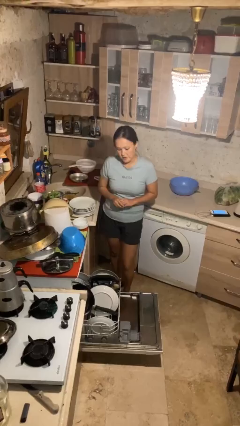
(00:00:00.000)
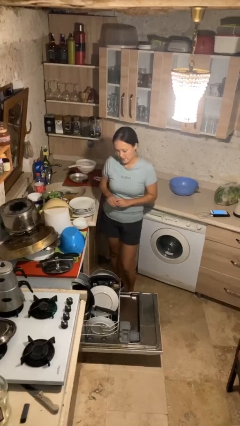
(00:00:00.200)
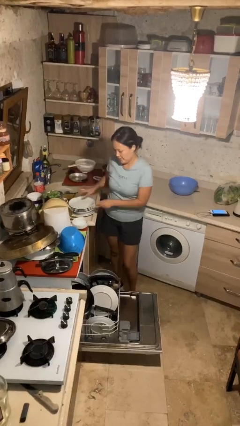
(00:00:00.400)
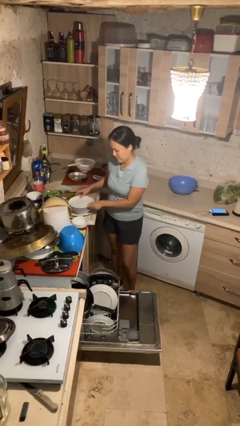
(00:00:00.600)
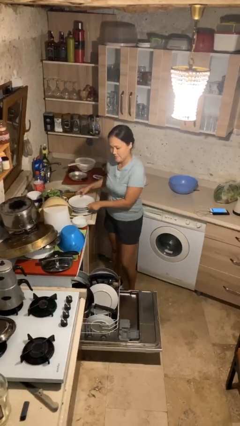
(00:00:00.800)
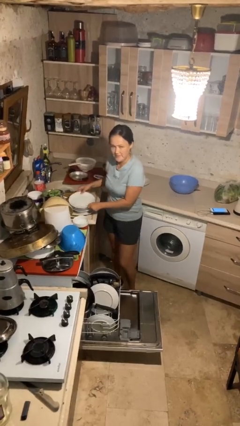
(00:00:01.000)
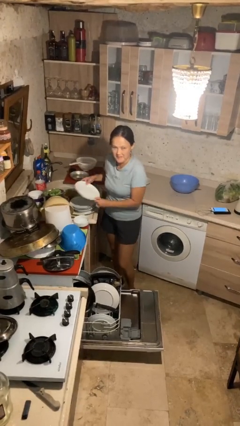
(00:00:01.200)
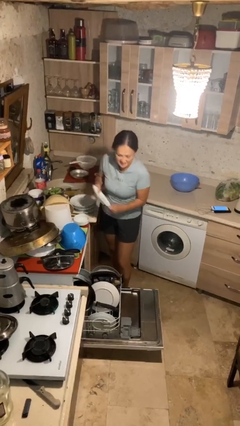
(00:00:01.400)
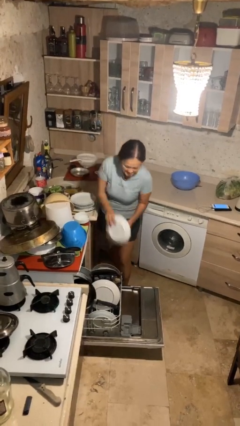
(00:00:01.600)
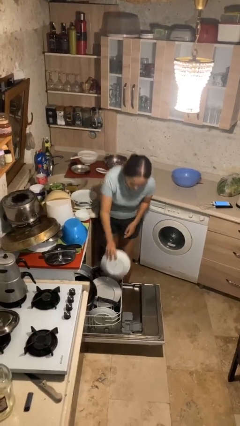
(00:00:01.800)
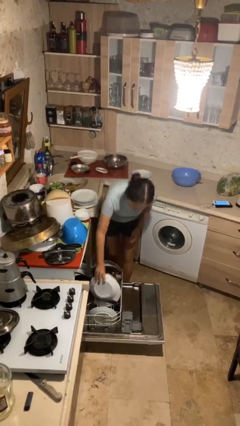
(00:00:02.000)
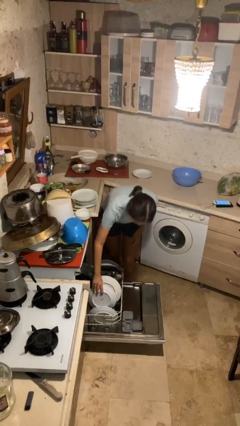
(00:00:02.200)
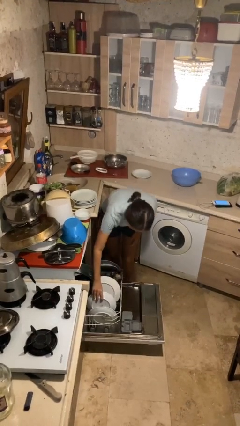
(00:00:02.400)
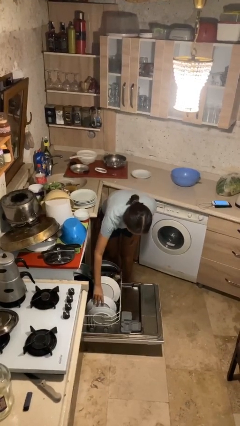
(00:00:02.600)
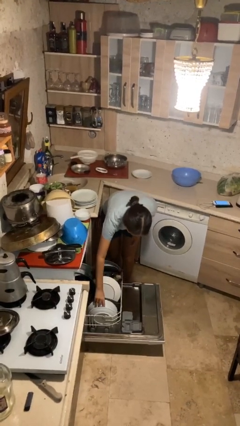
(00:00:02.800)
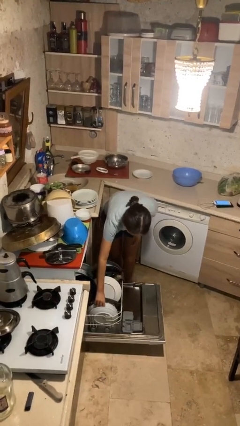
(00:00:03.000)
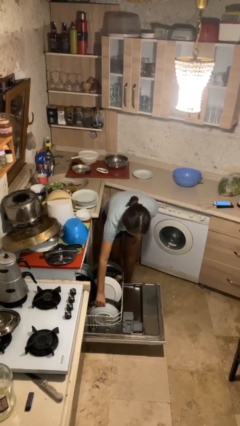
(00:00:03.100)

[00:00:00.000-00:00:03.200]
person loads dishwasher

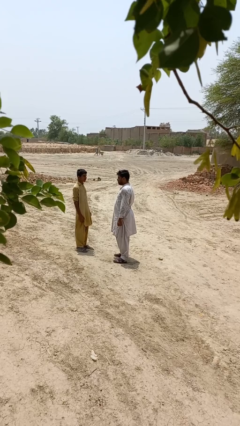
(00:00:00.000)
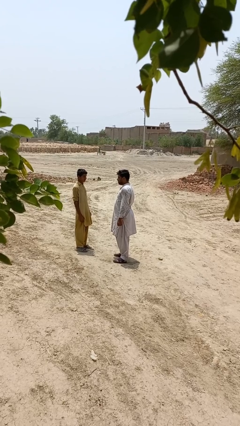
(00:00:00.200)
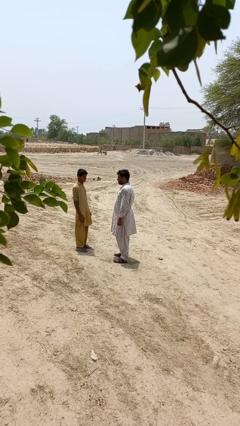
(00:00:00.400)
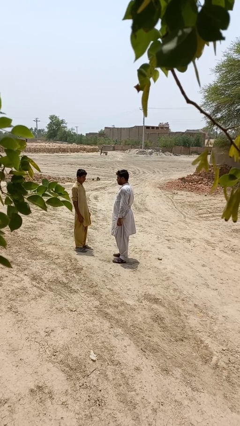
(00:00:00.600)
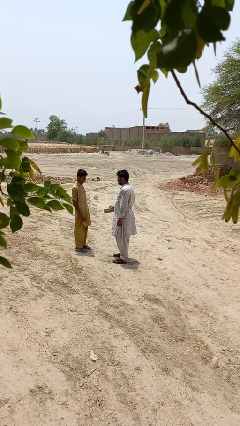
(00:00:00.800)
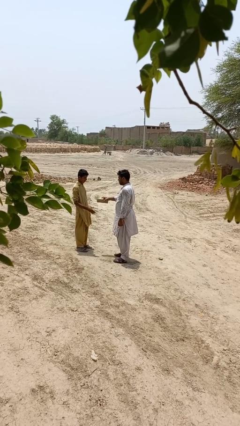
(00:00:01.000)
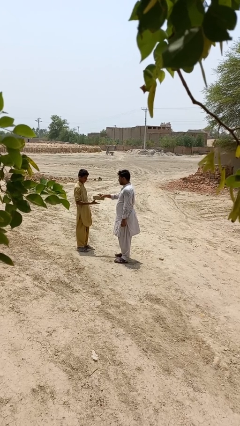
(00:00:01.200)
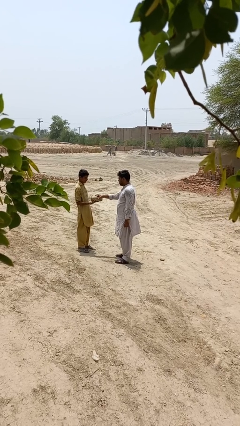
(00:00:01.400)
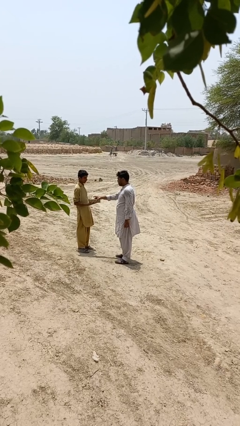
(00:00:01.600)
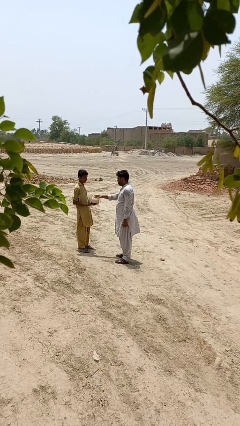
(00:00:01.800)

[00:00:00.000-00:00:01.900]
person transfers object to person

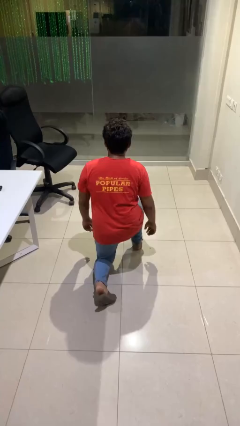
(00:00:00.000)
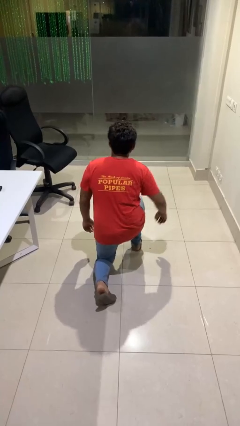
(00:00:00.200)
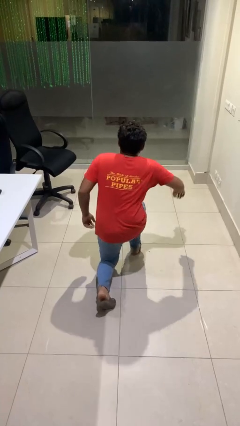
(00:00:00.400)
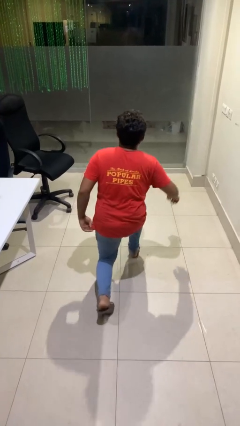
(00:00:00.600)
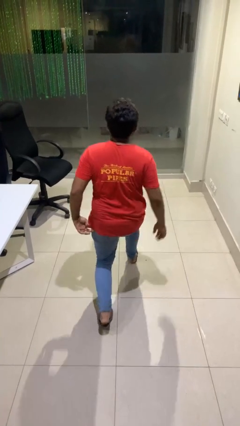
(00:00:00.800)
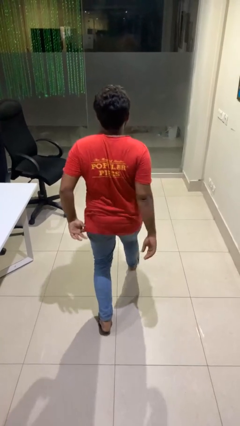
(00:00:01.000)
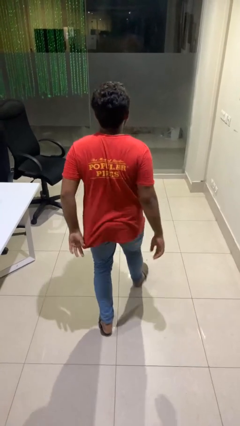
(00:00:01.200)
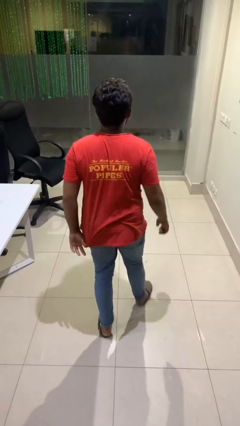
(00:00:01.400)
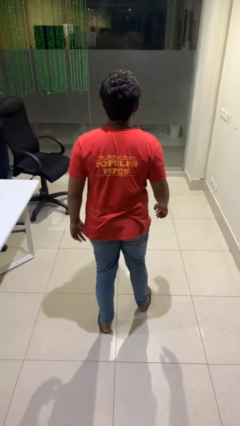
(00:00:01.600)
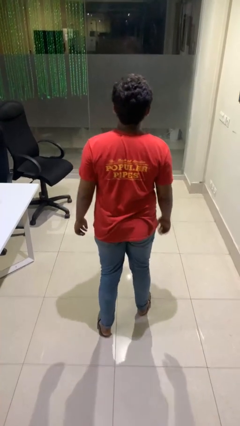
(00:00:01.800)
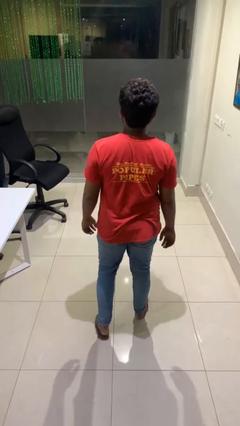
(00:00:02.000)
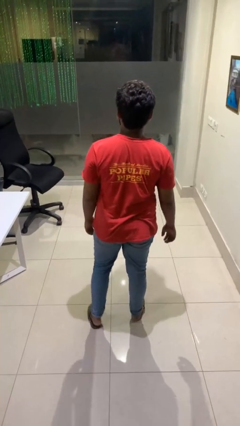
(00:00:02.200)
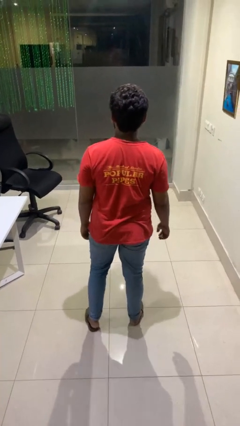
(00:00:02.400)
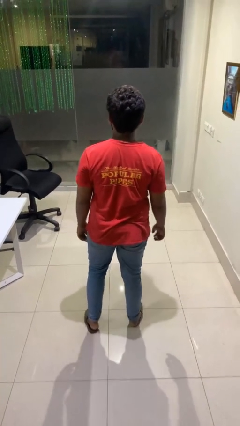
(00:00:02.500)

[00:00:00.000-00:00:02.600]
person stands up from floor

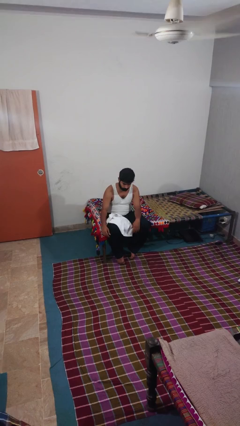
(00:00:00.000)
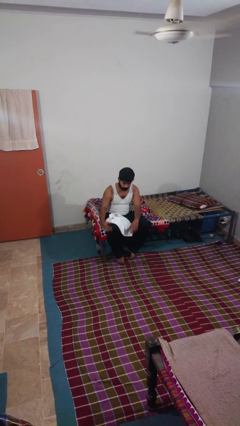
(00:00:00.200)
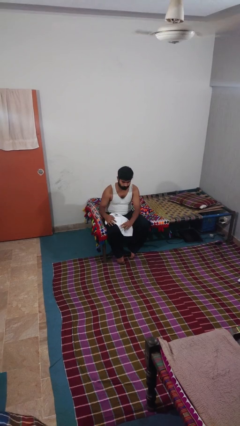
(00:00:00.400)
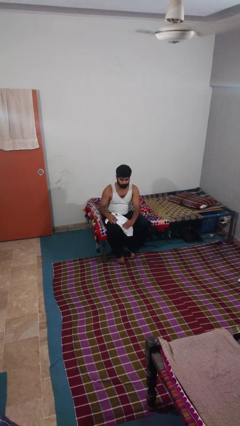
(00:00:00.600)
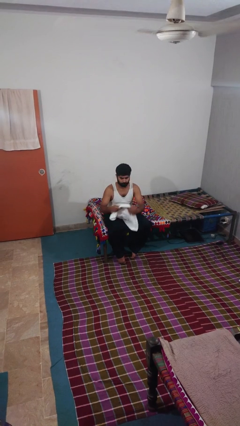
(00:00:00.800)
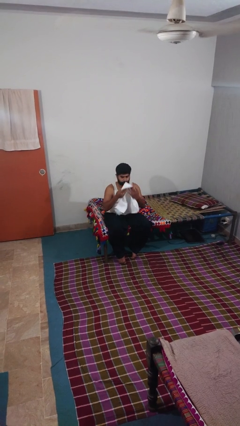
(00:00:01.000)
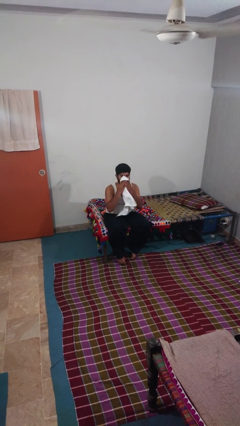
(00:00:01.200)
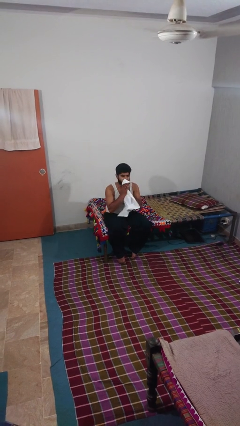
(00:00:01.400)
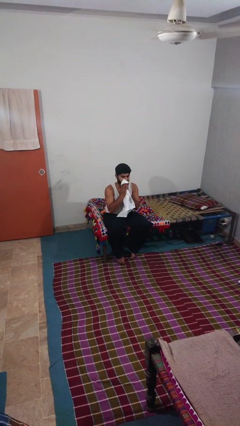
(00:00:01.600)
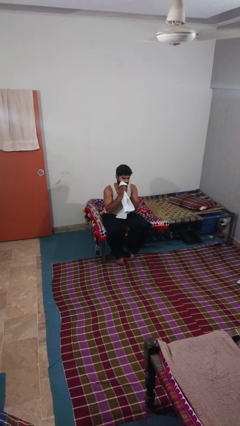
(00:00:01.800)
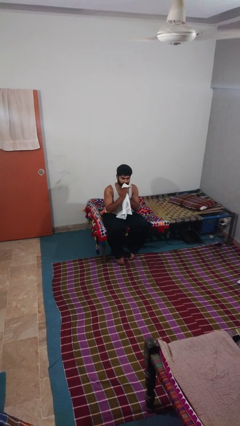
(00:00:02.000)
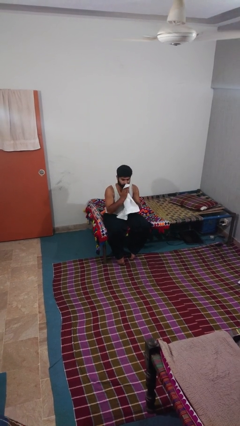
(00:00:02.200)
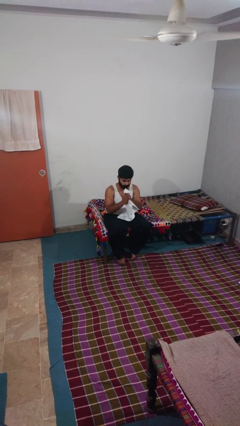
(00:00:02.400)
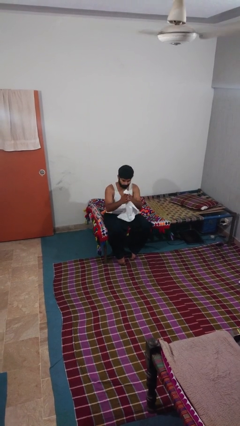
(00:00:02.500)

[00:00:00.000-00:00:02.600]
person wipes mouth with napkin

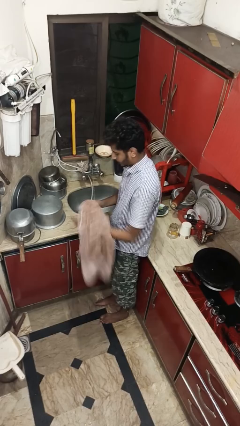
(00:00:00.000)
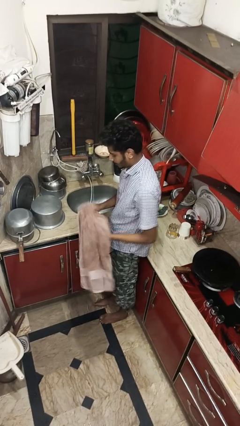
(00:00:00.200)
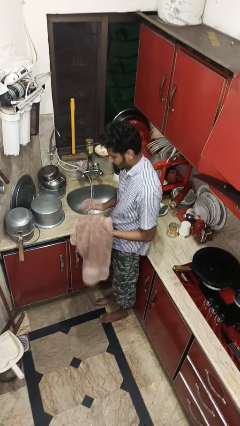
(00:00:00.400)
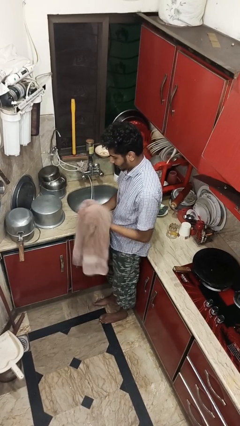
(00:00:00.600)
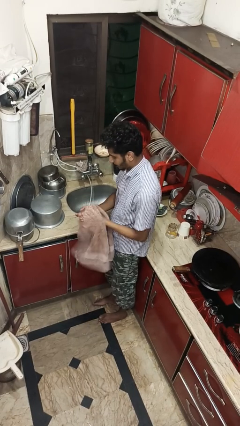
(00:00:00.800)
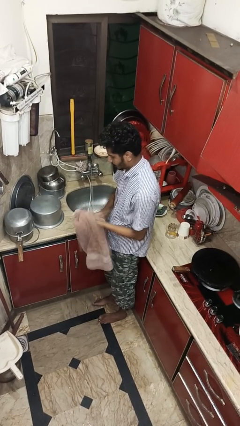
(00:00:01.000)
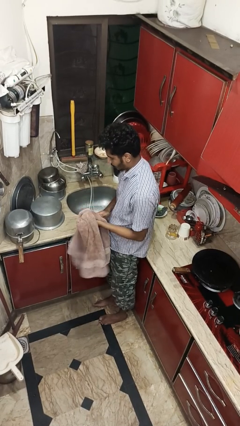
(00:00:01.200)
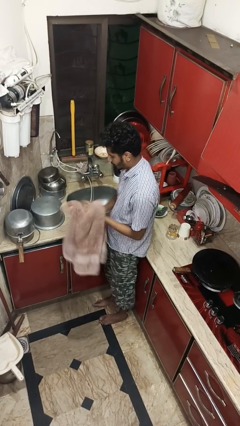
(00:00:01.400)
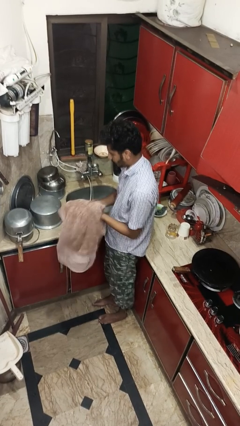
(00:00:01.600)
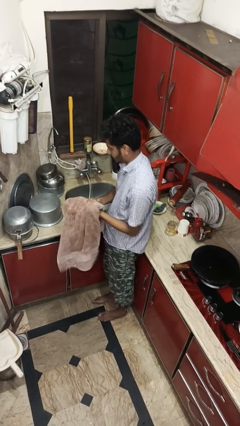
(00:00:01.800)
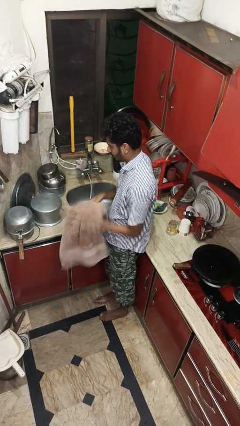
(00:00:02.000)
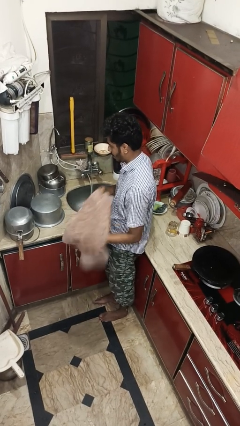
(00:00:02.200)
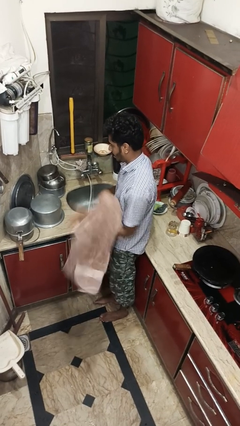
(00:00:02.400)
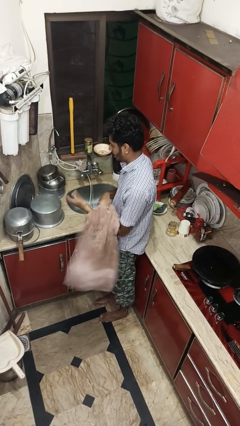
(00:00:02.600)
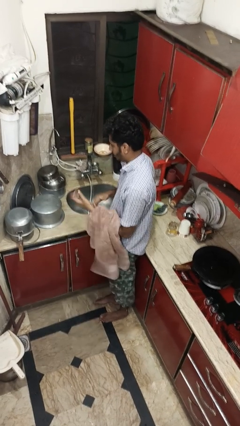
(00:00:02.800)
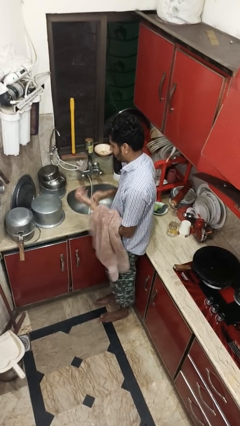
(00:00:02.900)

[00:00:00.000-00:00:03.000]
person dries hands with towel

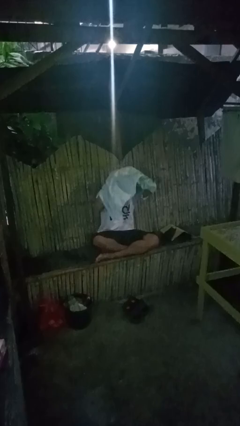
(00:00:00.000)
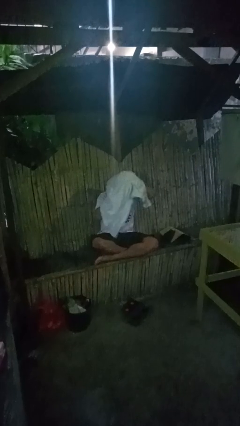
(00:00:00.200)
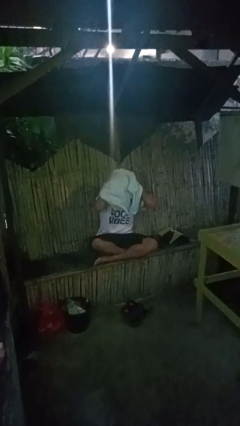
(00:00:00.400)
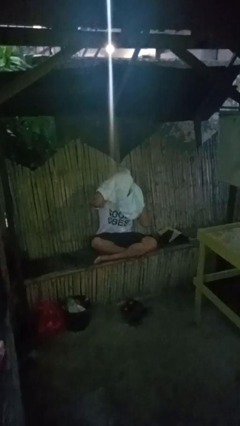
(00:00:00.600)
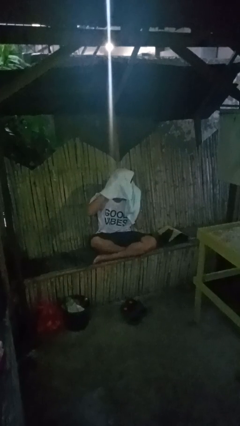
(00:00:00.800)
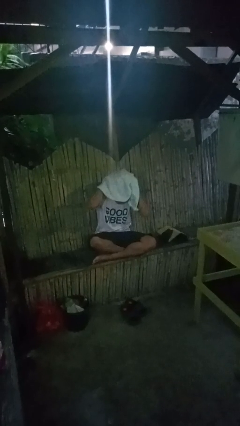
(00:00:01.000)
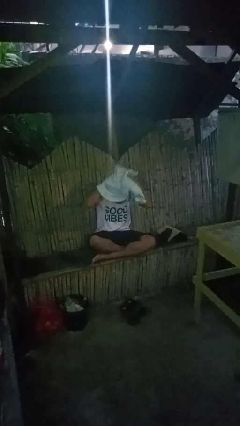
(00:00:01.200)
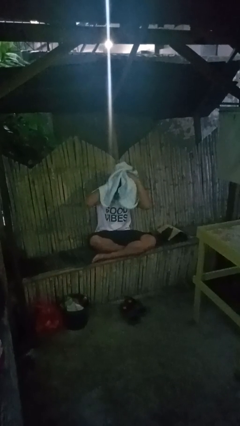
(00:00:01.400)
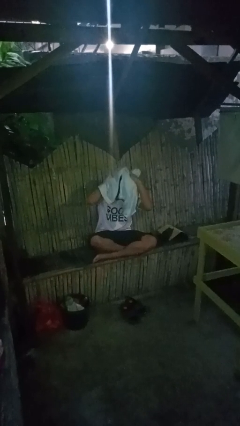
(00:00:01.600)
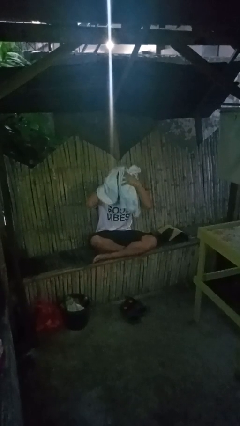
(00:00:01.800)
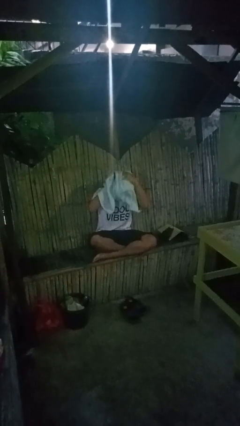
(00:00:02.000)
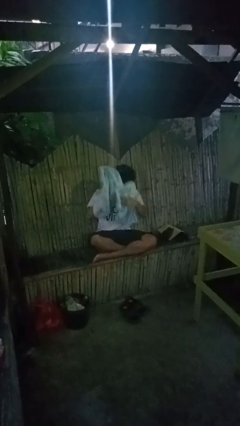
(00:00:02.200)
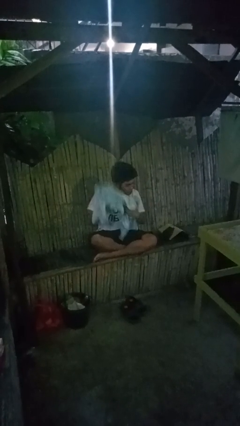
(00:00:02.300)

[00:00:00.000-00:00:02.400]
person dries hair with towel

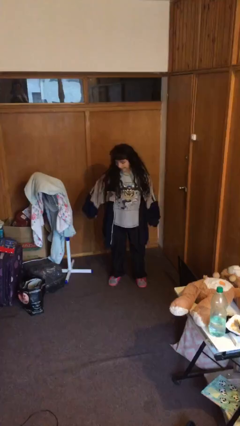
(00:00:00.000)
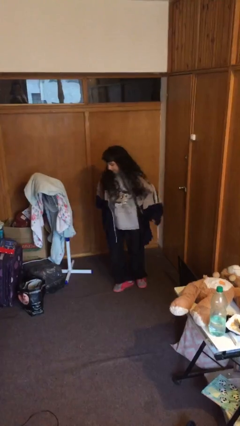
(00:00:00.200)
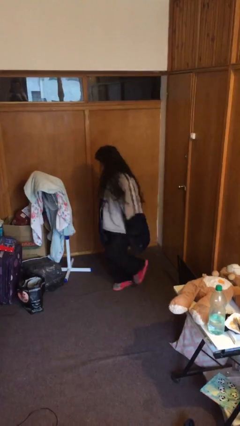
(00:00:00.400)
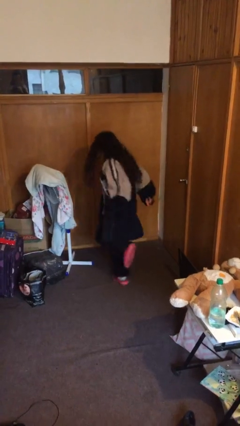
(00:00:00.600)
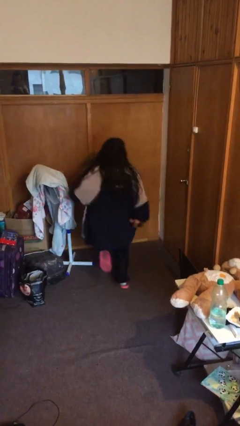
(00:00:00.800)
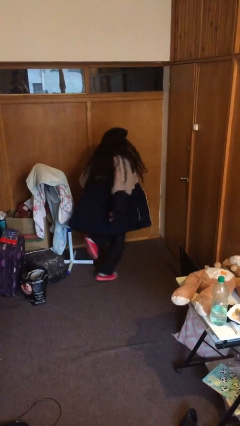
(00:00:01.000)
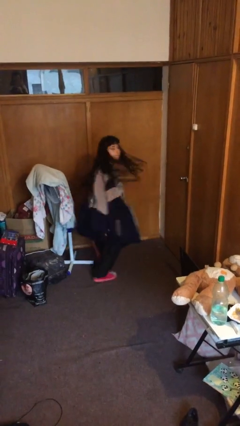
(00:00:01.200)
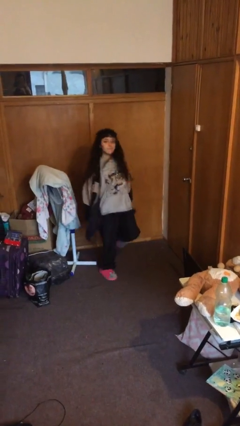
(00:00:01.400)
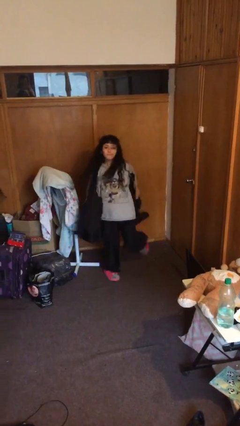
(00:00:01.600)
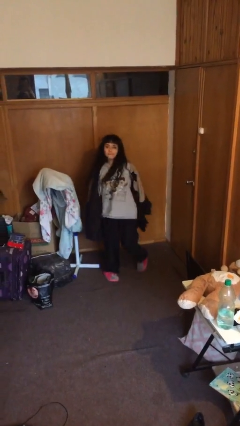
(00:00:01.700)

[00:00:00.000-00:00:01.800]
person twirls
